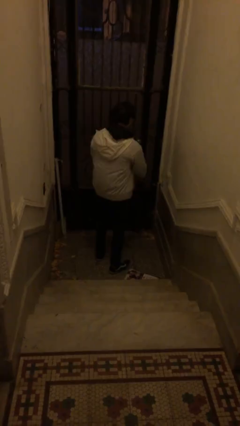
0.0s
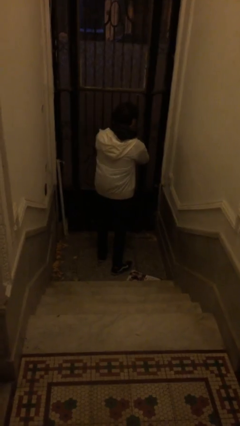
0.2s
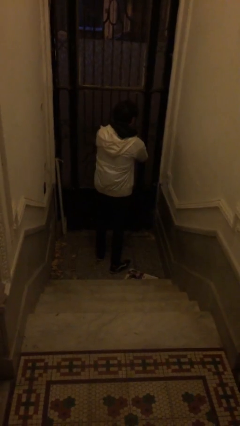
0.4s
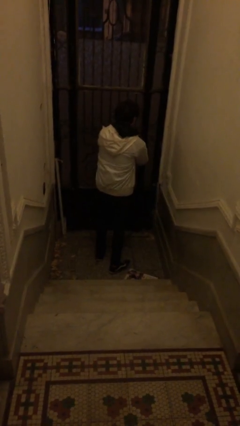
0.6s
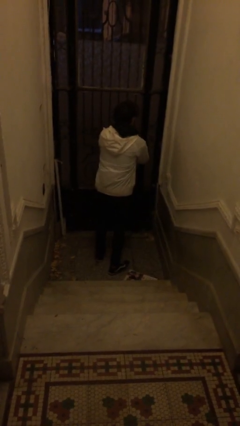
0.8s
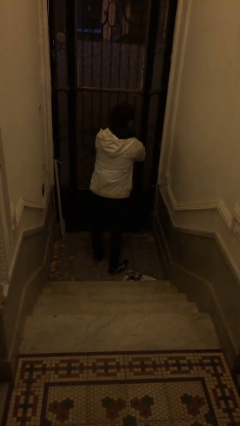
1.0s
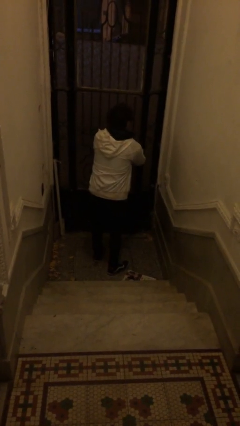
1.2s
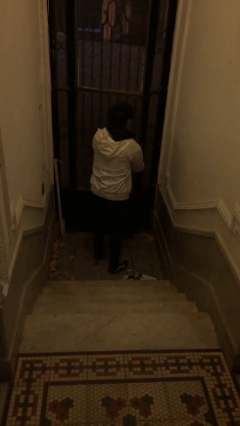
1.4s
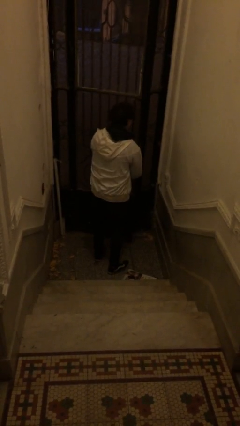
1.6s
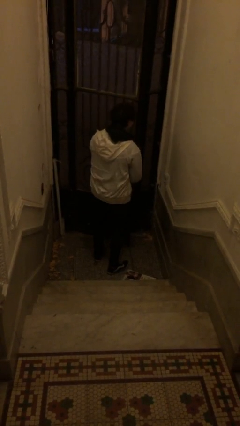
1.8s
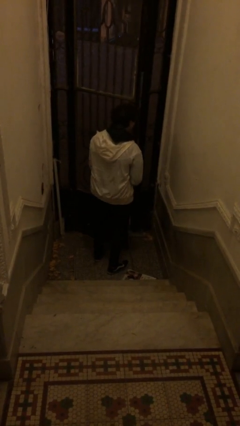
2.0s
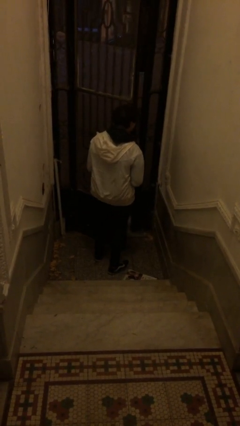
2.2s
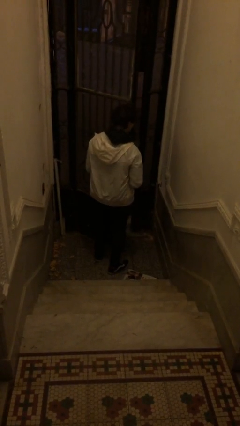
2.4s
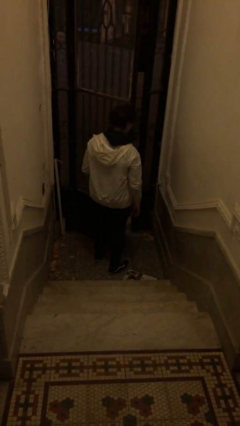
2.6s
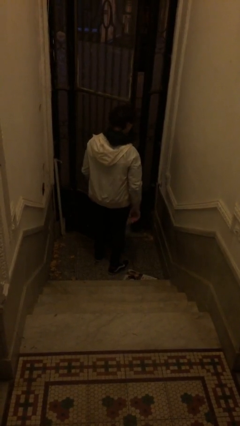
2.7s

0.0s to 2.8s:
person opens facility door

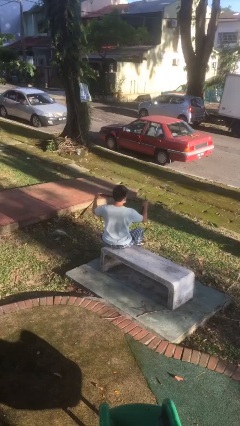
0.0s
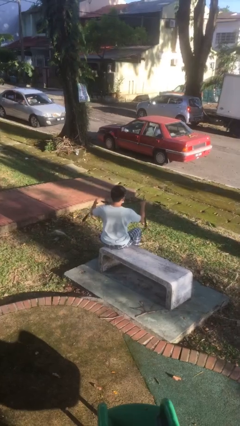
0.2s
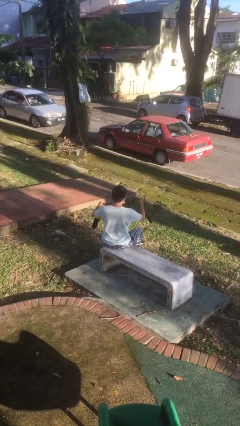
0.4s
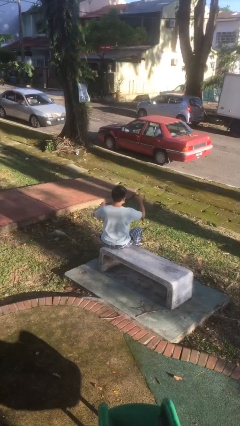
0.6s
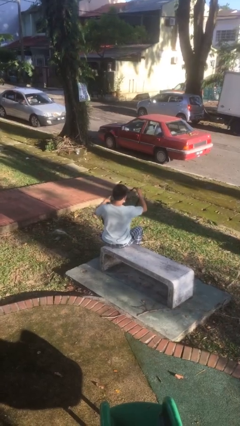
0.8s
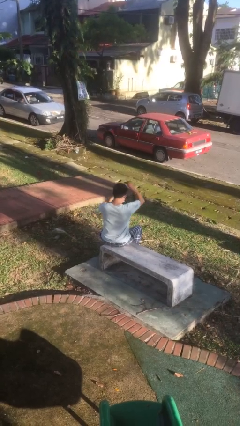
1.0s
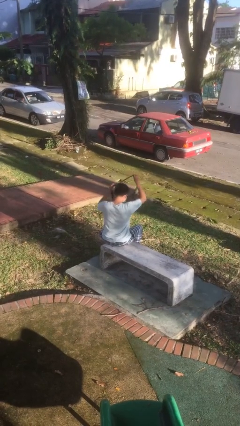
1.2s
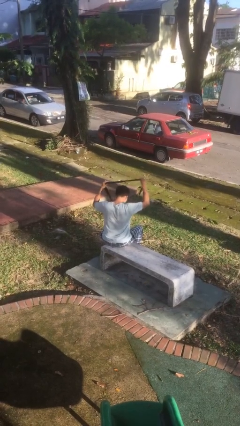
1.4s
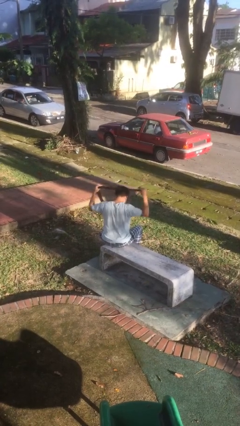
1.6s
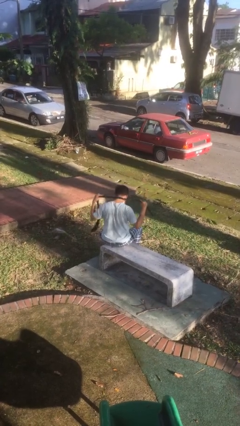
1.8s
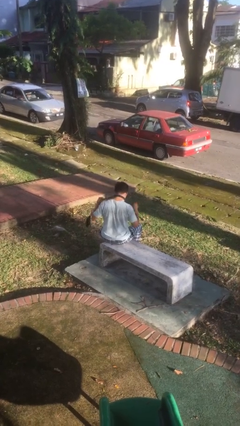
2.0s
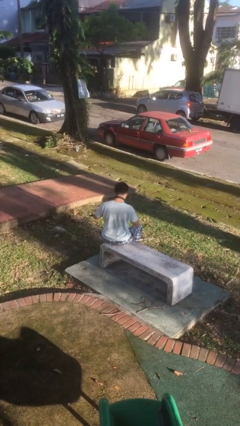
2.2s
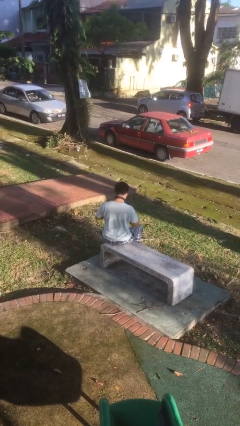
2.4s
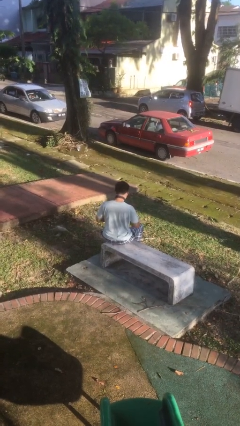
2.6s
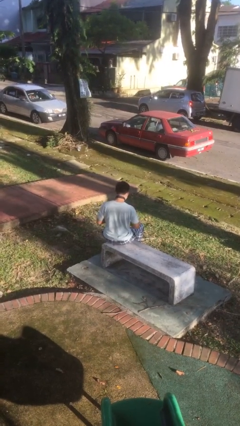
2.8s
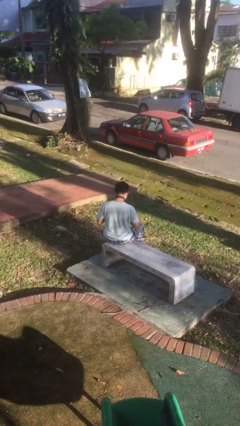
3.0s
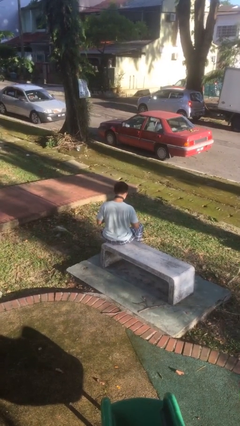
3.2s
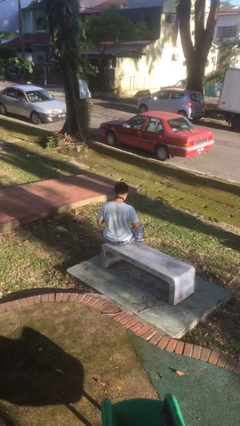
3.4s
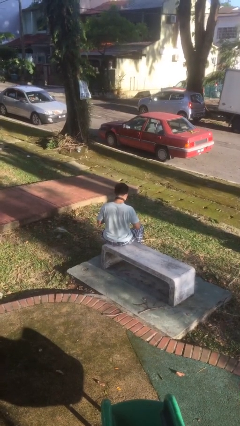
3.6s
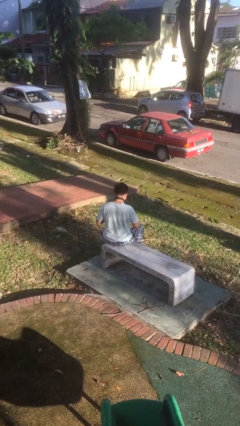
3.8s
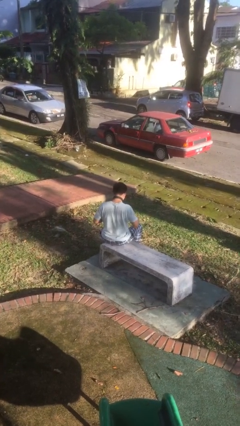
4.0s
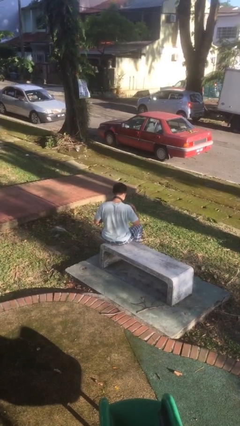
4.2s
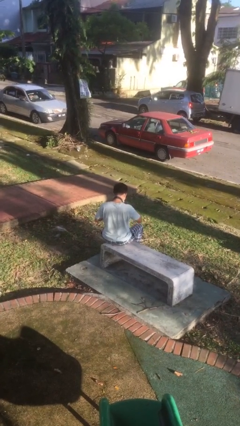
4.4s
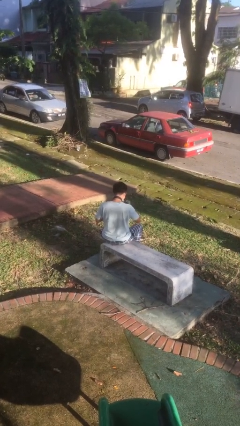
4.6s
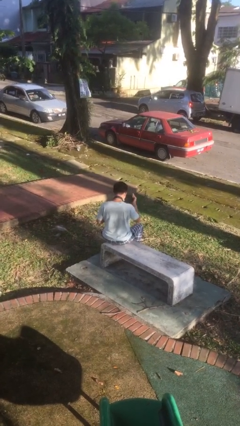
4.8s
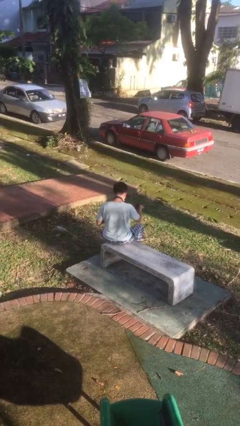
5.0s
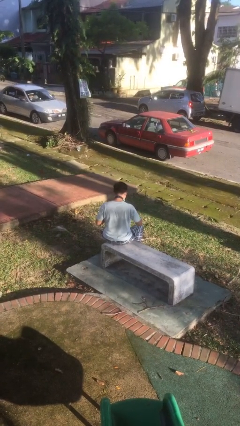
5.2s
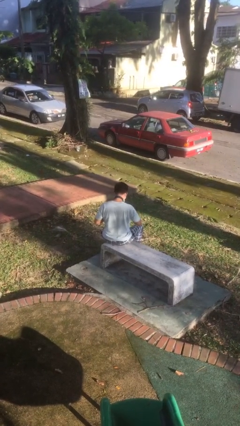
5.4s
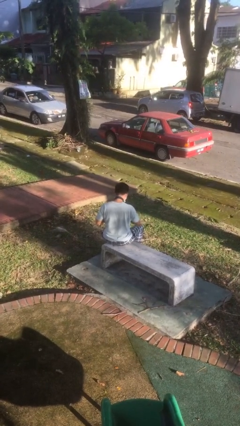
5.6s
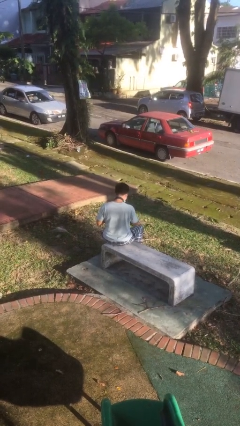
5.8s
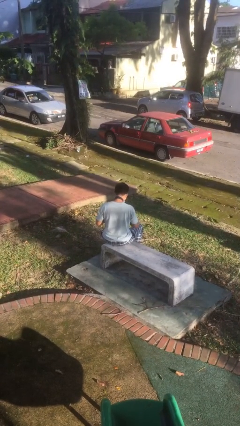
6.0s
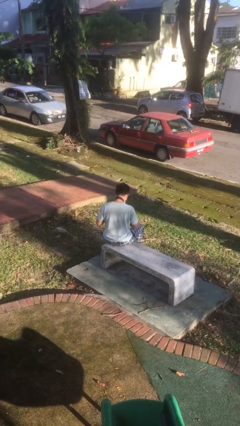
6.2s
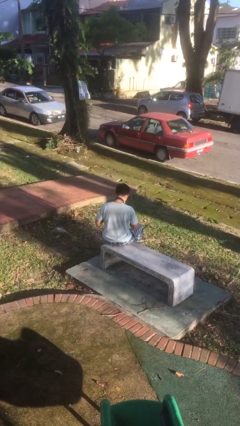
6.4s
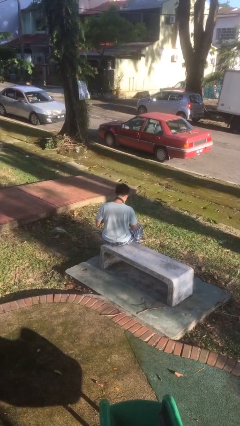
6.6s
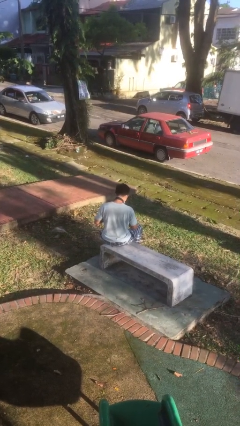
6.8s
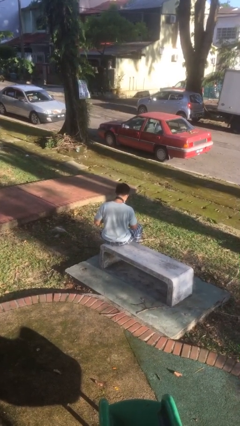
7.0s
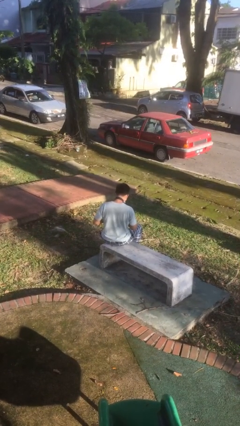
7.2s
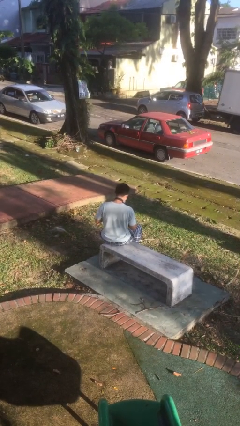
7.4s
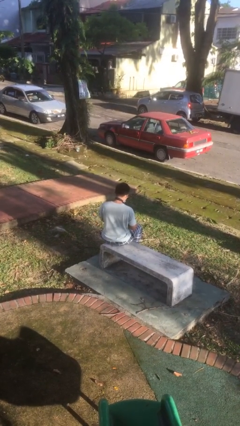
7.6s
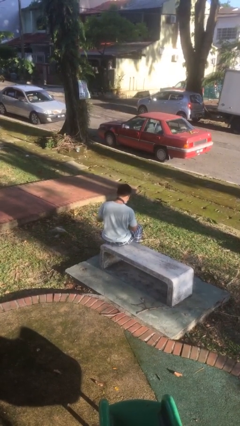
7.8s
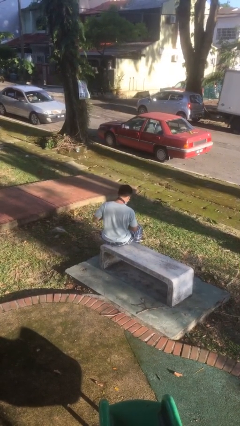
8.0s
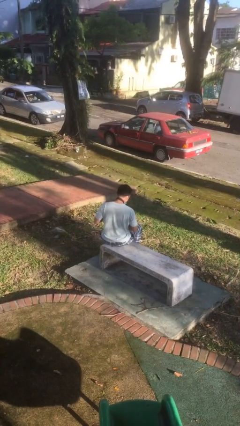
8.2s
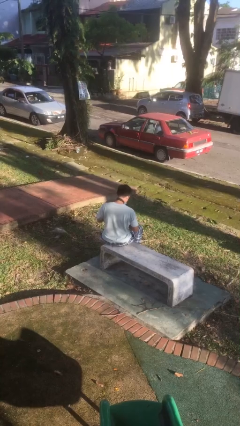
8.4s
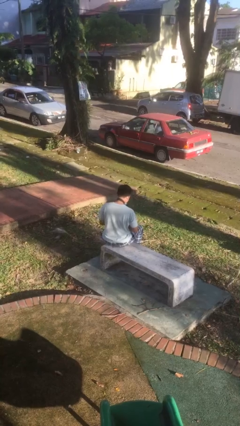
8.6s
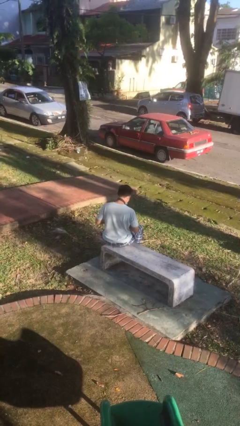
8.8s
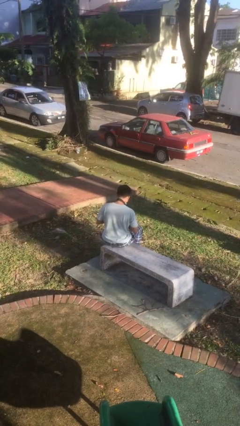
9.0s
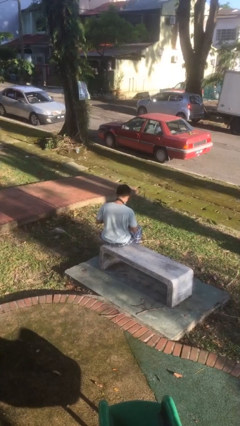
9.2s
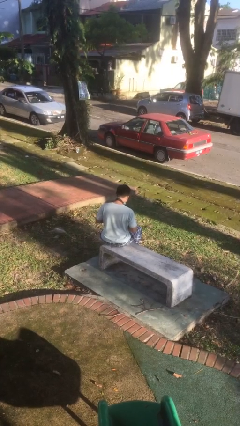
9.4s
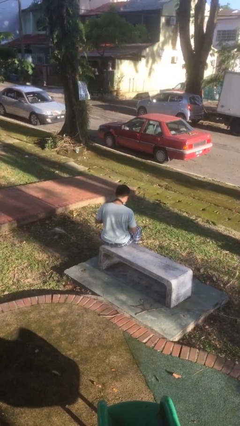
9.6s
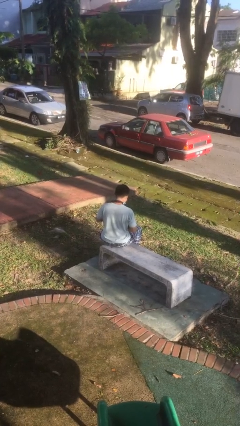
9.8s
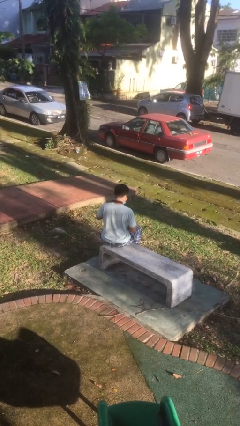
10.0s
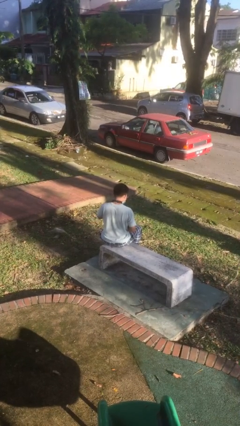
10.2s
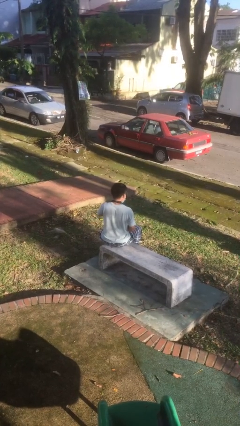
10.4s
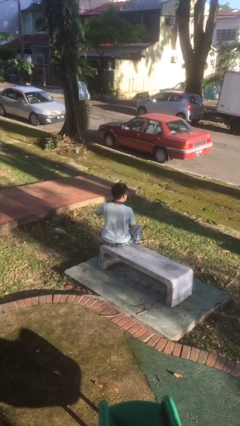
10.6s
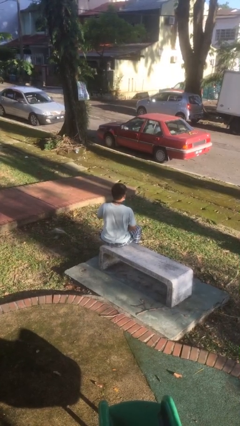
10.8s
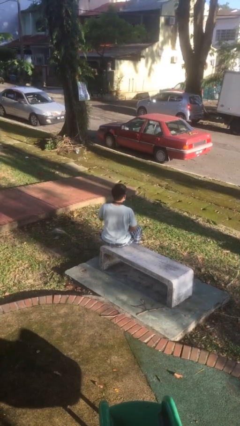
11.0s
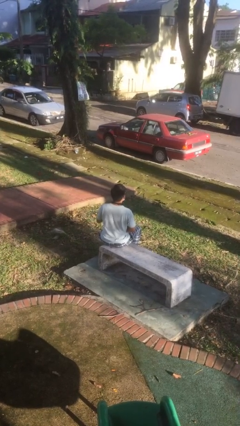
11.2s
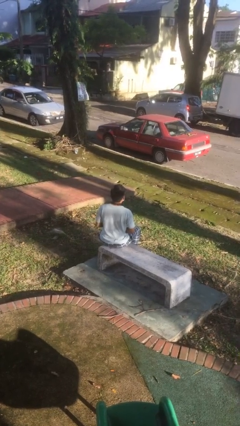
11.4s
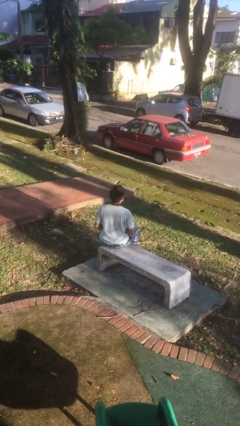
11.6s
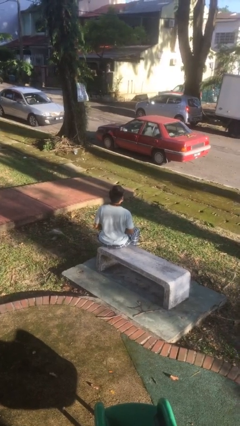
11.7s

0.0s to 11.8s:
person puts on necktie

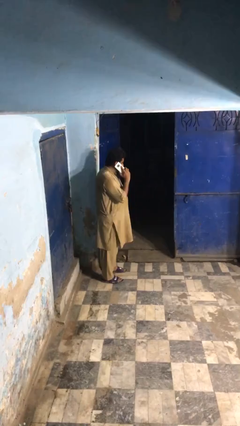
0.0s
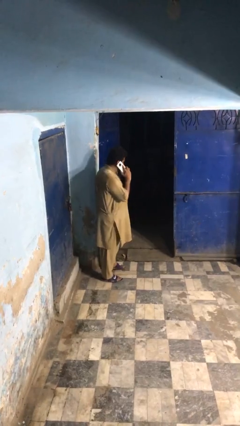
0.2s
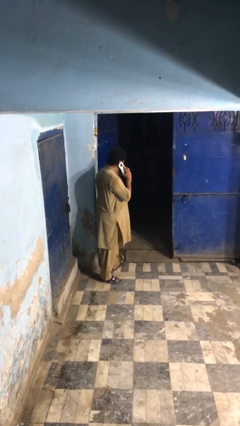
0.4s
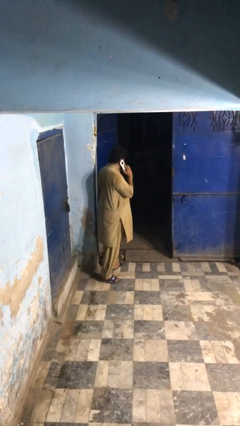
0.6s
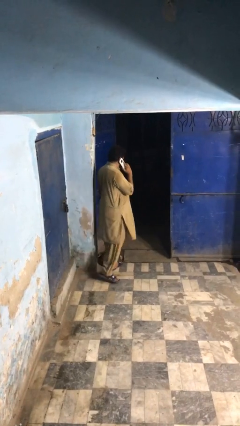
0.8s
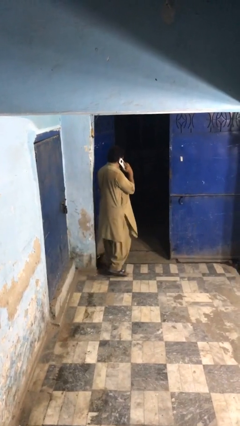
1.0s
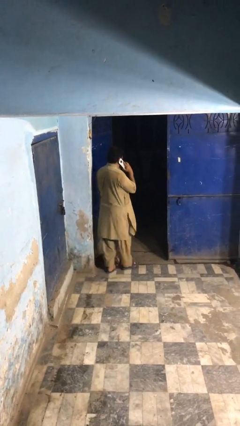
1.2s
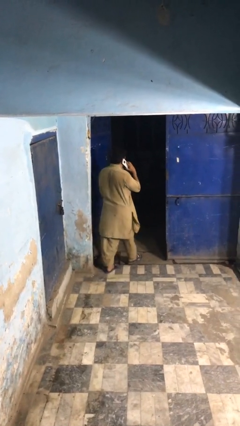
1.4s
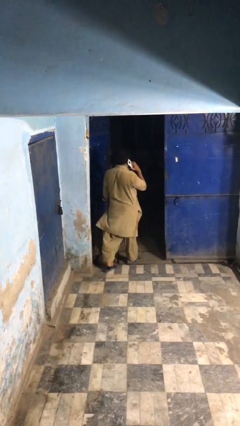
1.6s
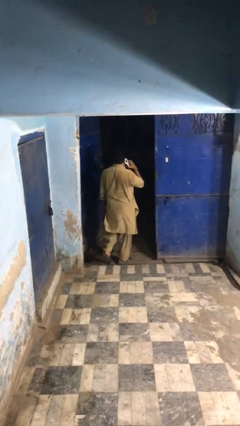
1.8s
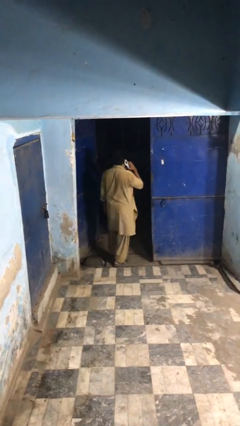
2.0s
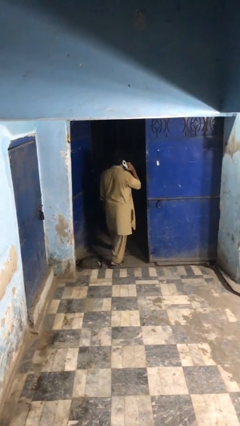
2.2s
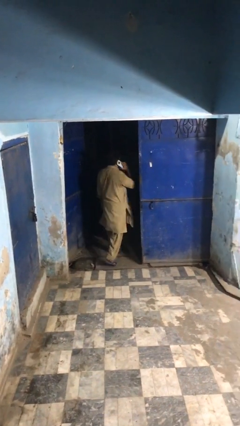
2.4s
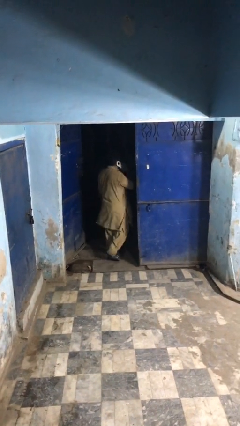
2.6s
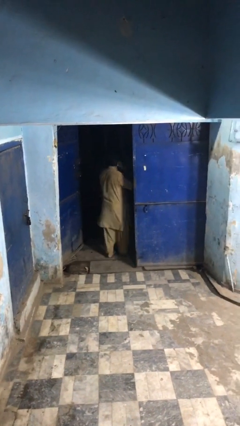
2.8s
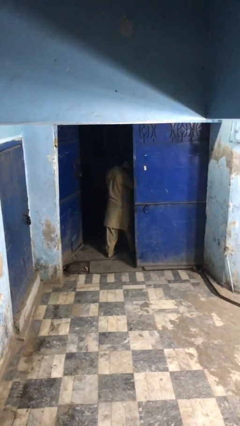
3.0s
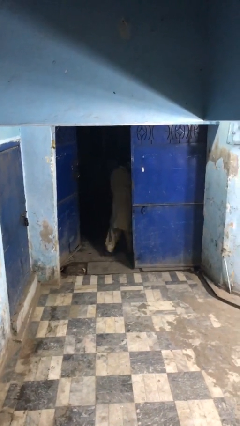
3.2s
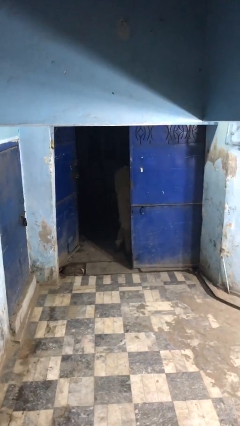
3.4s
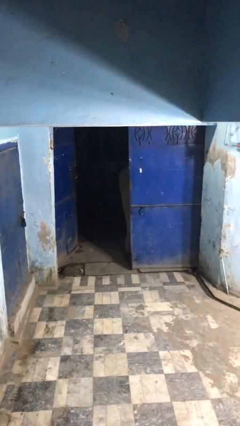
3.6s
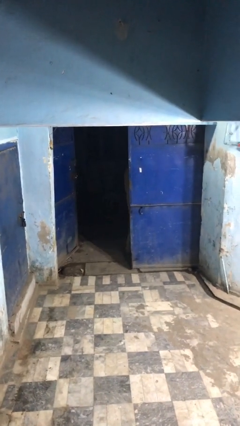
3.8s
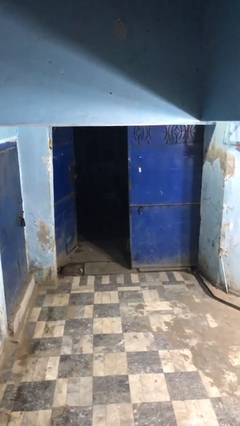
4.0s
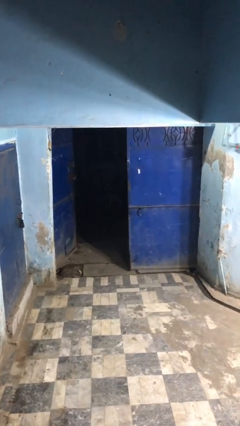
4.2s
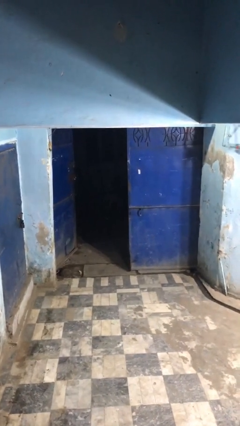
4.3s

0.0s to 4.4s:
person exits scene through structure
